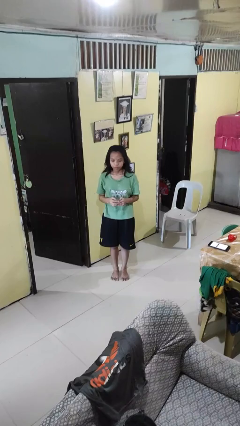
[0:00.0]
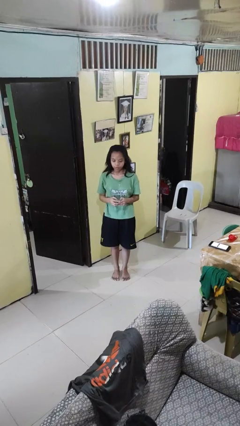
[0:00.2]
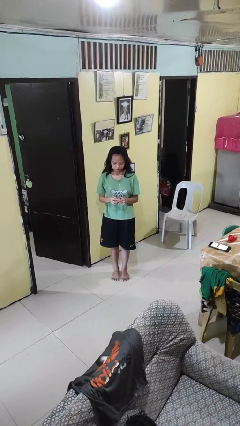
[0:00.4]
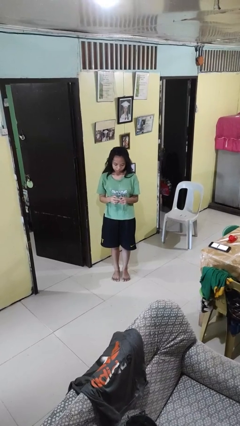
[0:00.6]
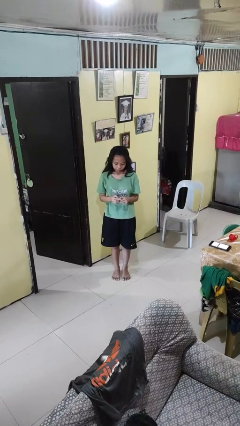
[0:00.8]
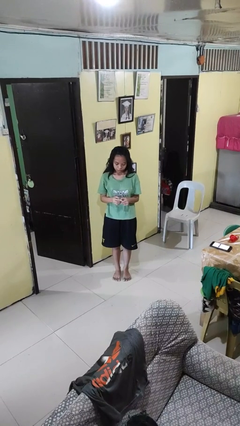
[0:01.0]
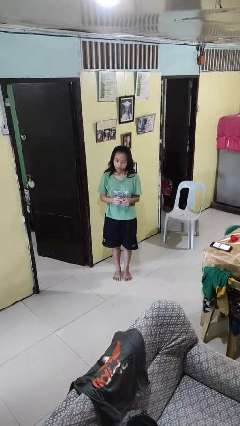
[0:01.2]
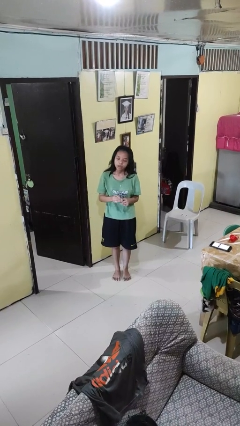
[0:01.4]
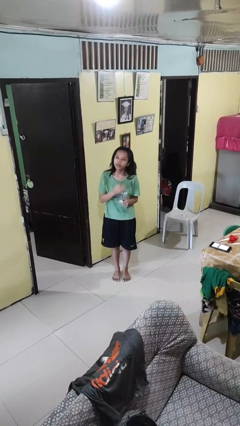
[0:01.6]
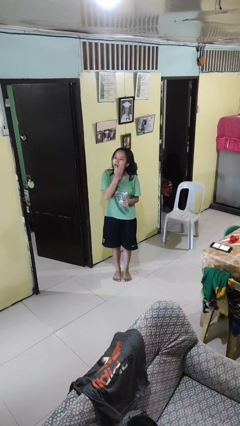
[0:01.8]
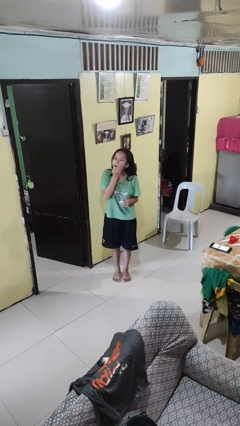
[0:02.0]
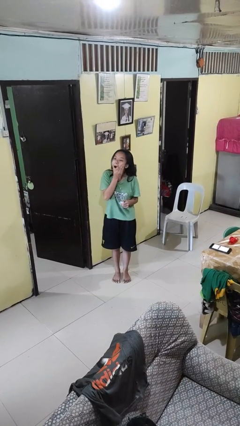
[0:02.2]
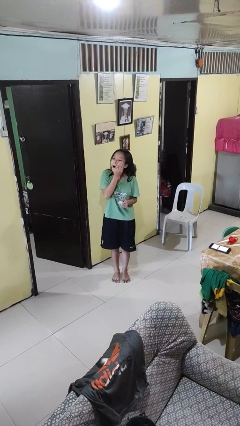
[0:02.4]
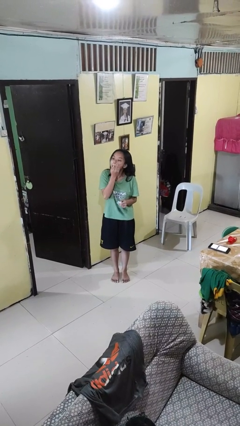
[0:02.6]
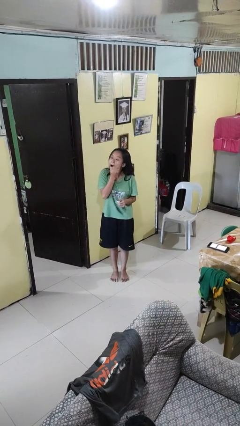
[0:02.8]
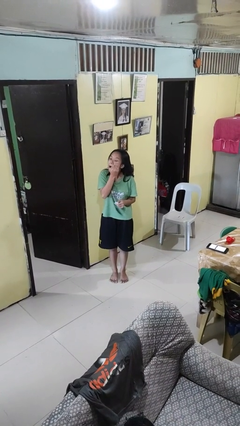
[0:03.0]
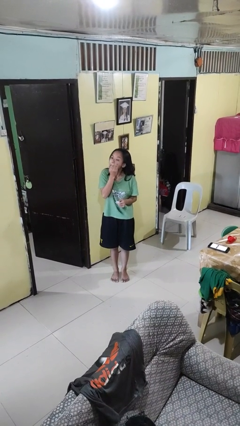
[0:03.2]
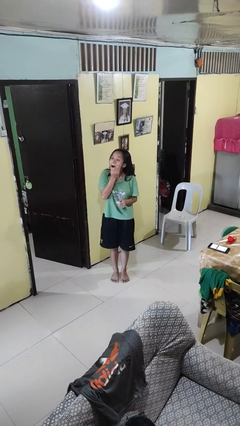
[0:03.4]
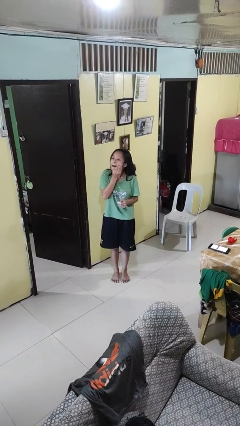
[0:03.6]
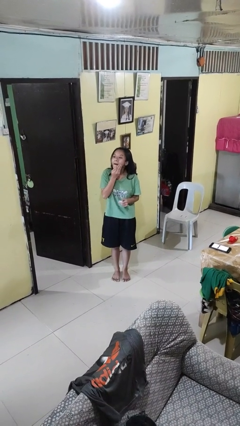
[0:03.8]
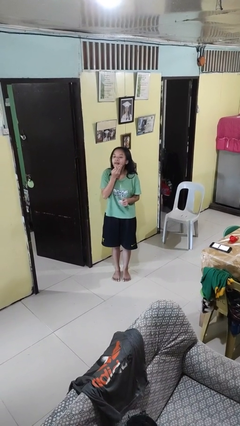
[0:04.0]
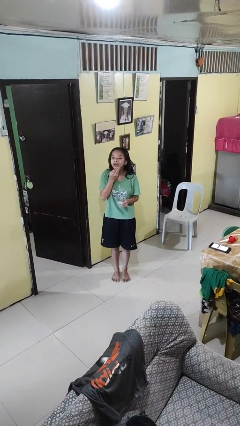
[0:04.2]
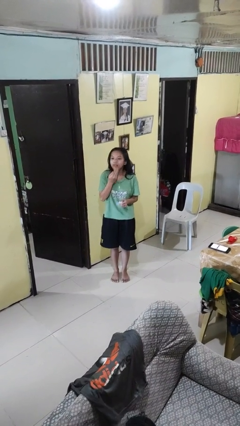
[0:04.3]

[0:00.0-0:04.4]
person applies facial moisturizer

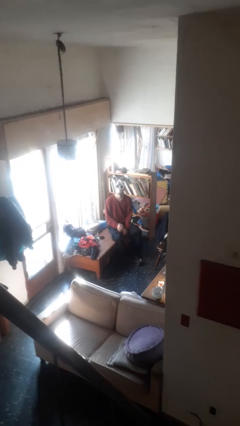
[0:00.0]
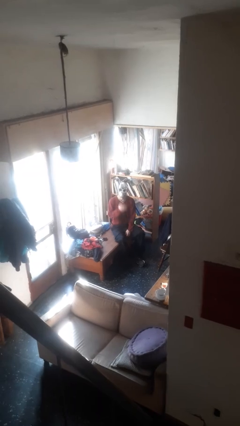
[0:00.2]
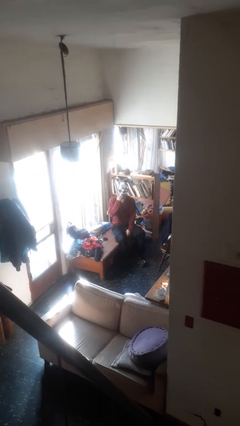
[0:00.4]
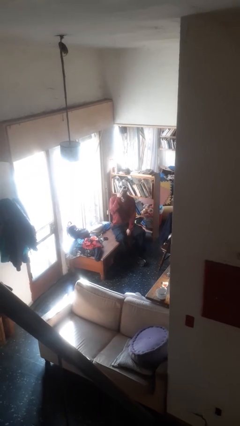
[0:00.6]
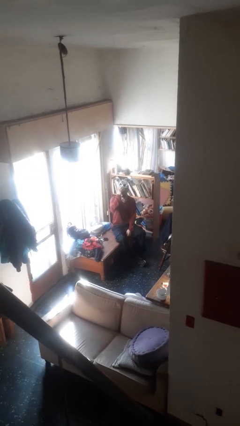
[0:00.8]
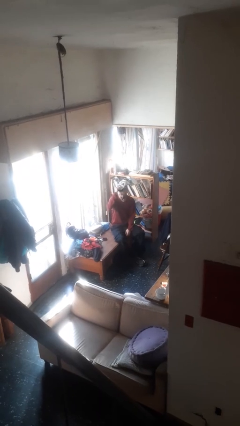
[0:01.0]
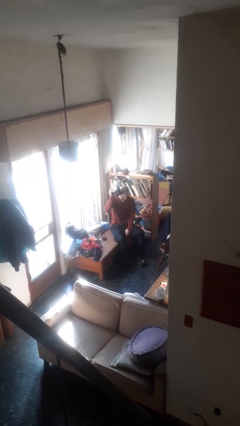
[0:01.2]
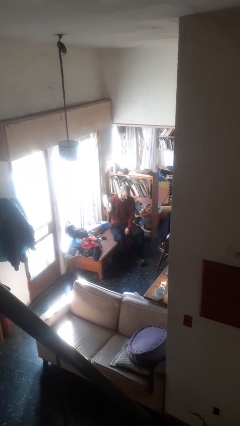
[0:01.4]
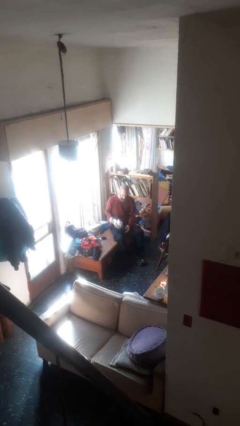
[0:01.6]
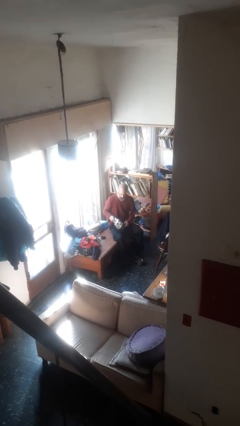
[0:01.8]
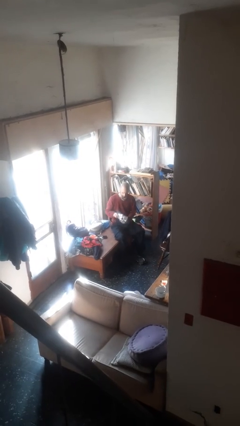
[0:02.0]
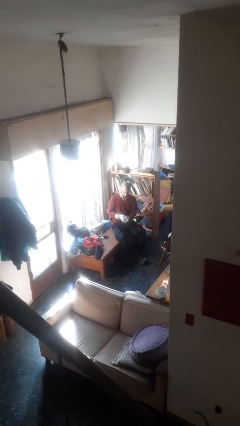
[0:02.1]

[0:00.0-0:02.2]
person takes off facemask

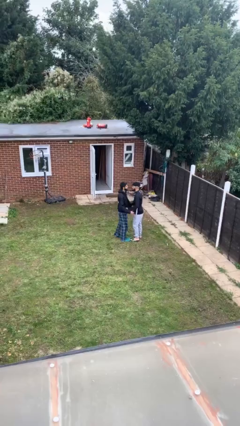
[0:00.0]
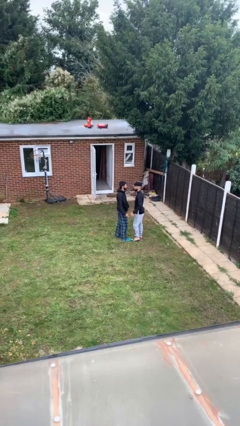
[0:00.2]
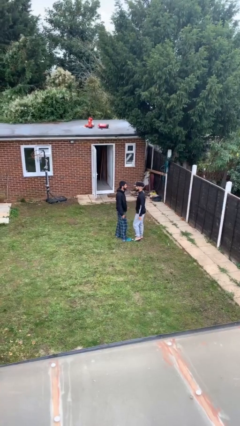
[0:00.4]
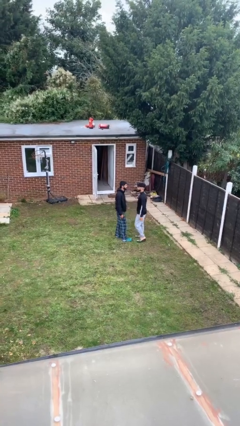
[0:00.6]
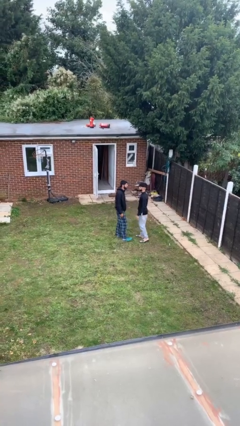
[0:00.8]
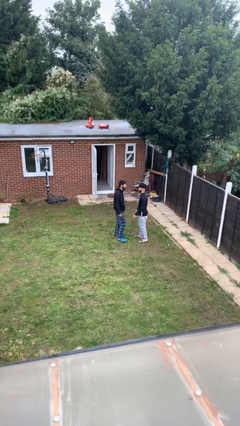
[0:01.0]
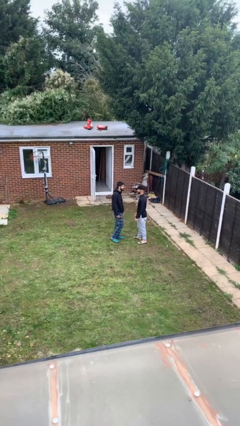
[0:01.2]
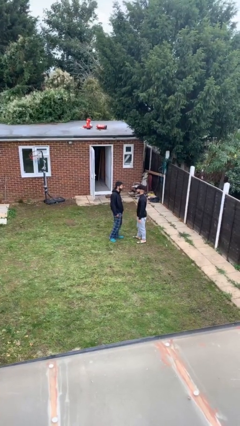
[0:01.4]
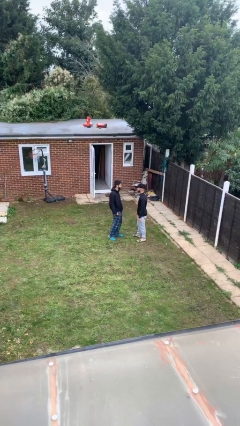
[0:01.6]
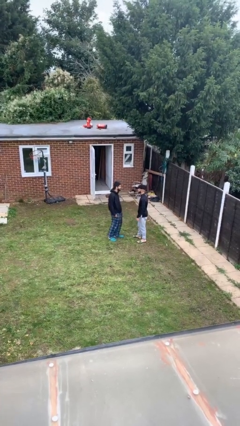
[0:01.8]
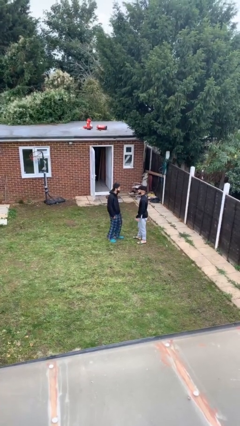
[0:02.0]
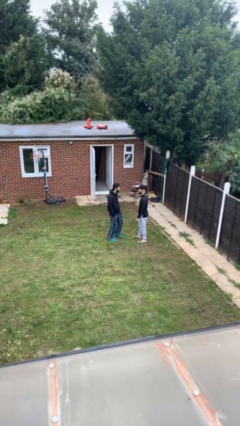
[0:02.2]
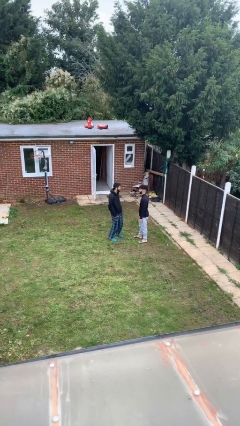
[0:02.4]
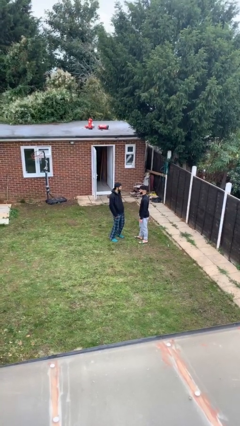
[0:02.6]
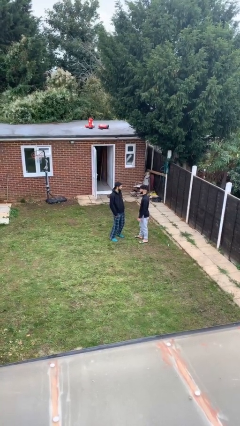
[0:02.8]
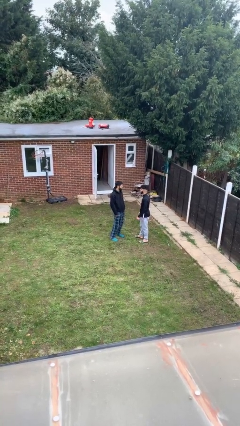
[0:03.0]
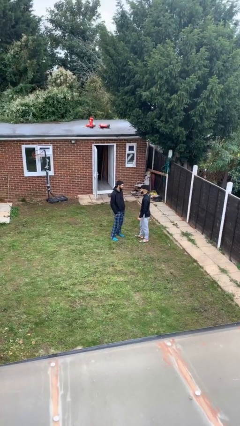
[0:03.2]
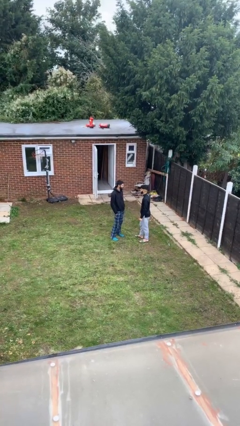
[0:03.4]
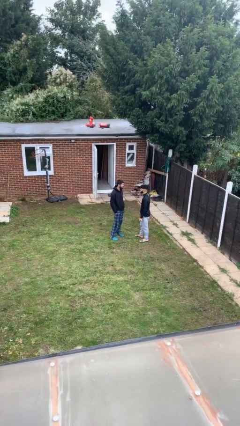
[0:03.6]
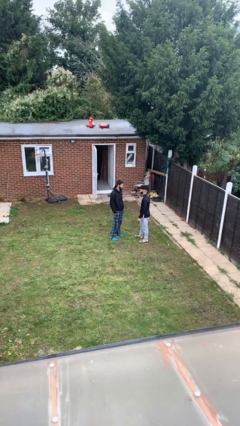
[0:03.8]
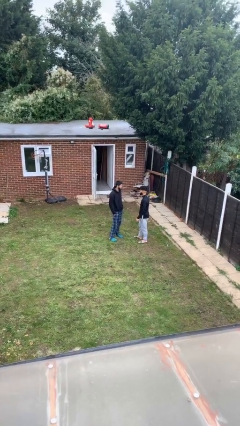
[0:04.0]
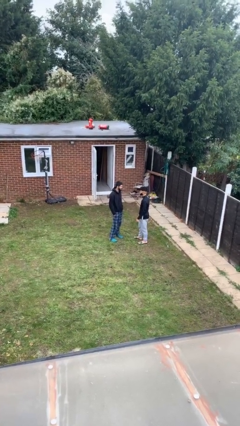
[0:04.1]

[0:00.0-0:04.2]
person talks to person

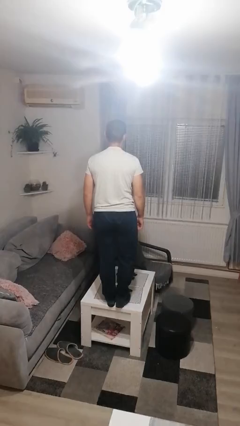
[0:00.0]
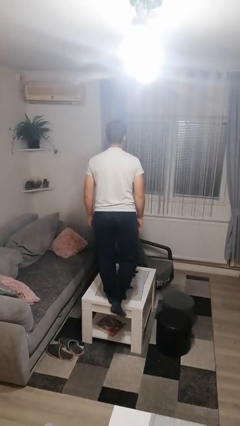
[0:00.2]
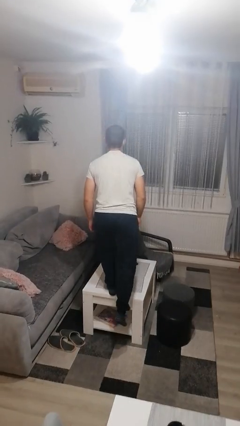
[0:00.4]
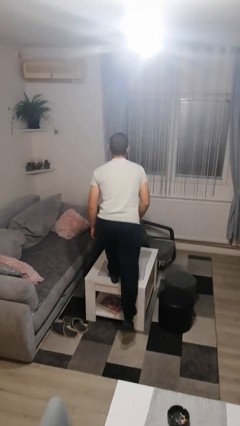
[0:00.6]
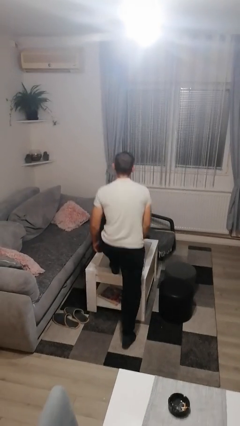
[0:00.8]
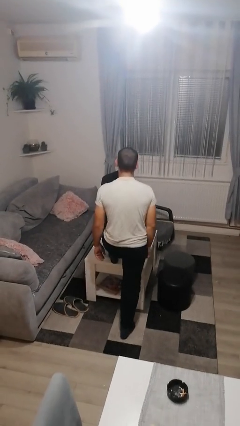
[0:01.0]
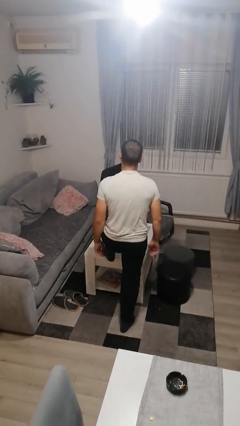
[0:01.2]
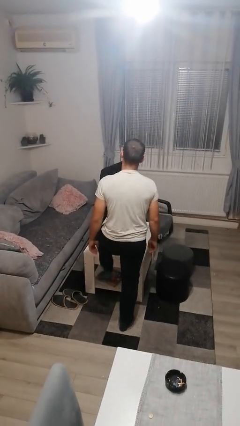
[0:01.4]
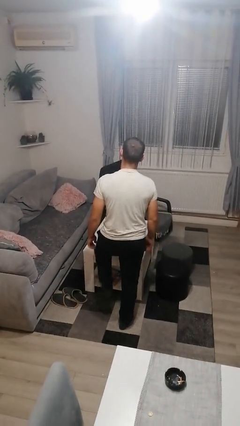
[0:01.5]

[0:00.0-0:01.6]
person climbs off table

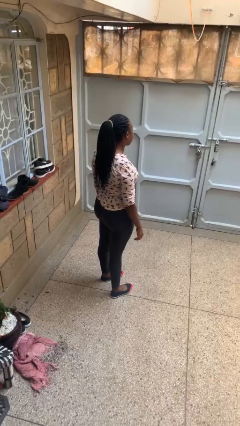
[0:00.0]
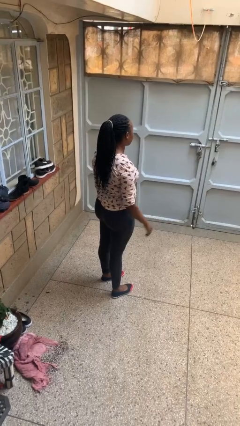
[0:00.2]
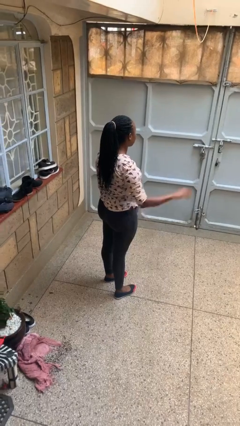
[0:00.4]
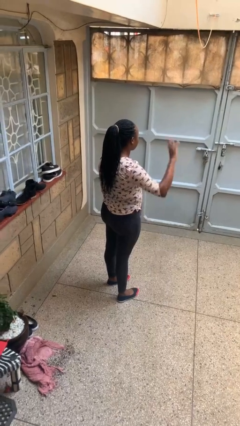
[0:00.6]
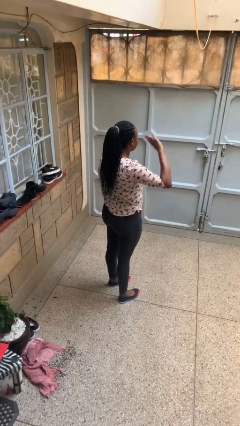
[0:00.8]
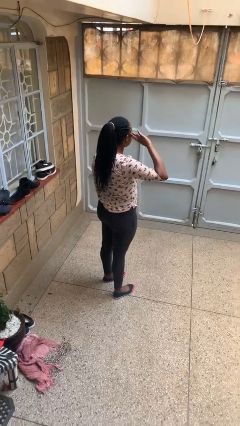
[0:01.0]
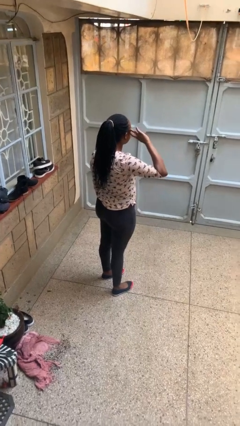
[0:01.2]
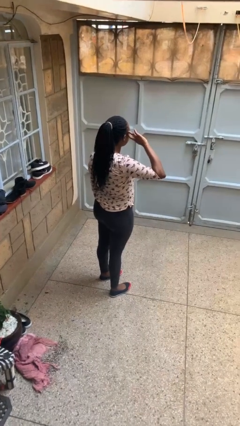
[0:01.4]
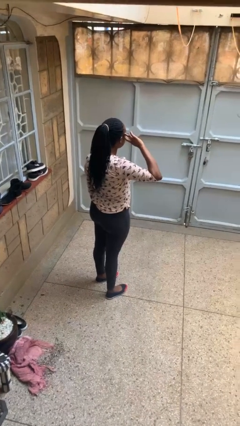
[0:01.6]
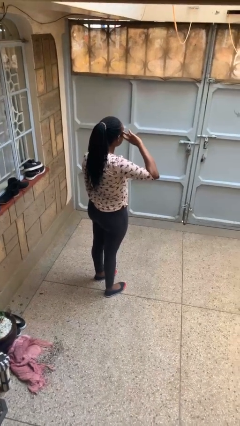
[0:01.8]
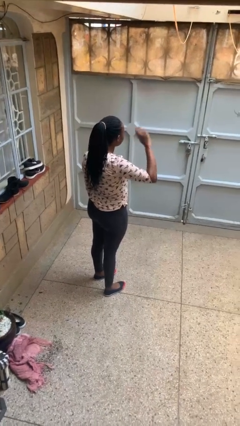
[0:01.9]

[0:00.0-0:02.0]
person salutes

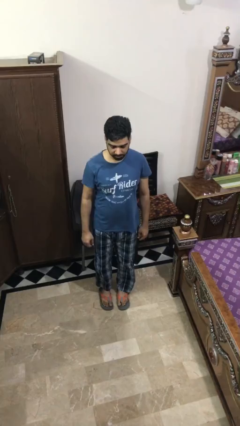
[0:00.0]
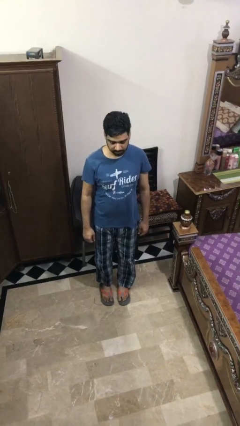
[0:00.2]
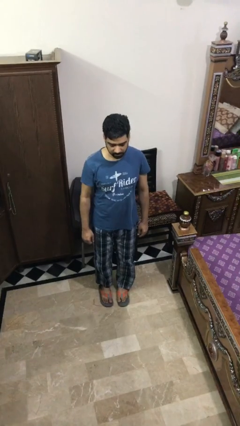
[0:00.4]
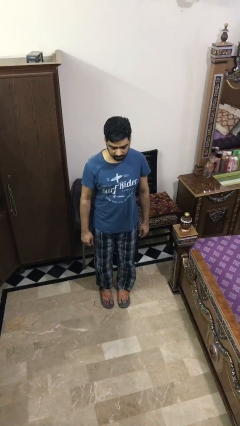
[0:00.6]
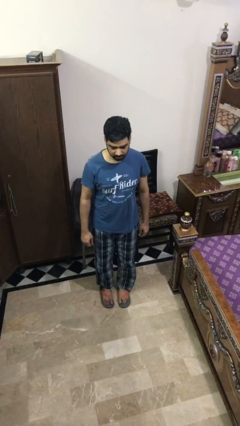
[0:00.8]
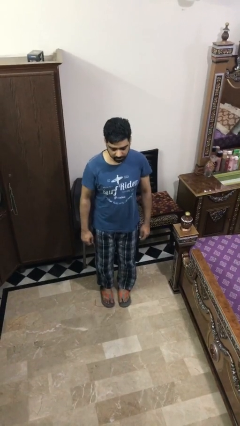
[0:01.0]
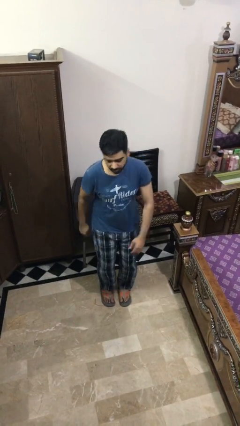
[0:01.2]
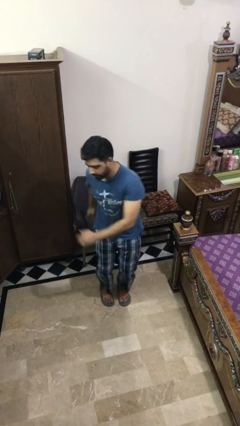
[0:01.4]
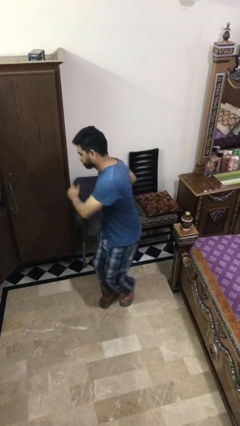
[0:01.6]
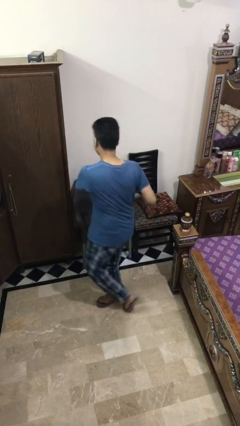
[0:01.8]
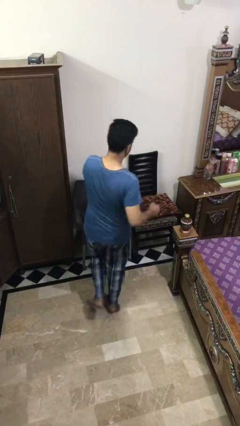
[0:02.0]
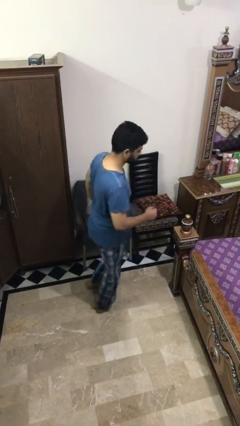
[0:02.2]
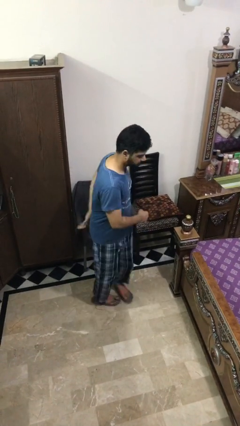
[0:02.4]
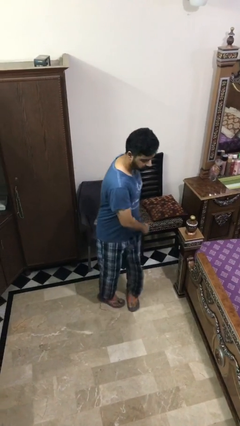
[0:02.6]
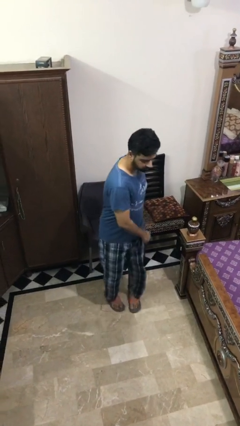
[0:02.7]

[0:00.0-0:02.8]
person twirls
